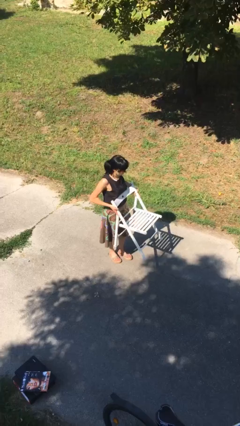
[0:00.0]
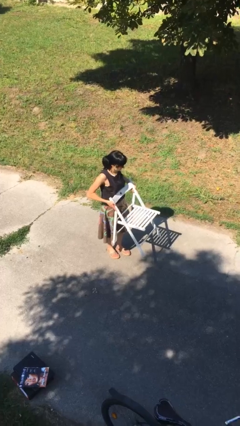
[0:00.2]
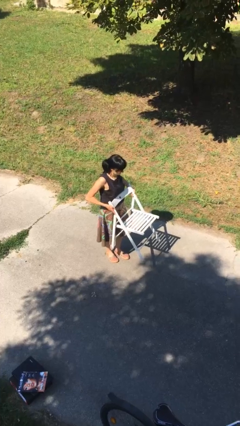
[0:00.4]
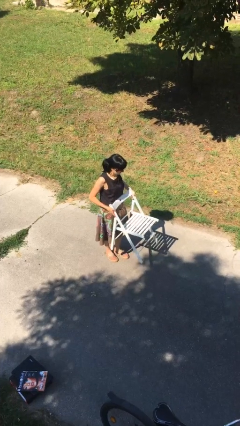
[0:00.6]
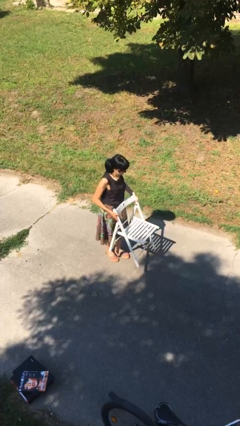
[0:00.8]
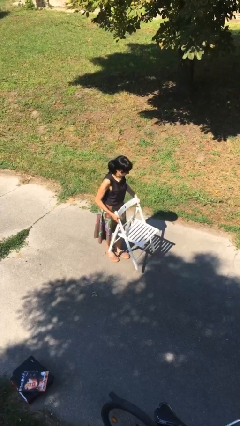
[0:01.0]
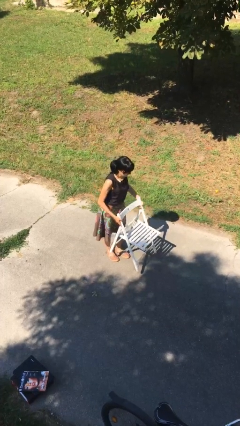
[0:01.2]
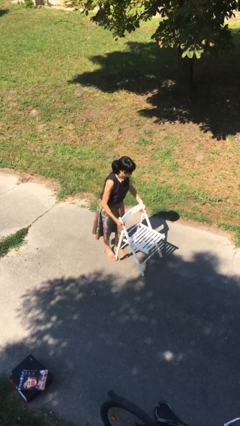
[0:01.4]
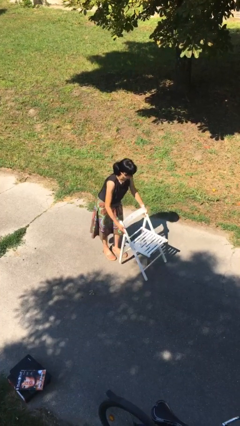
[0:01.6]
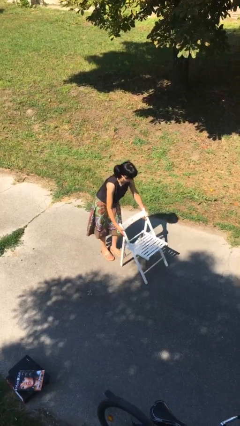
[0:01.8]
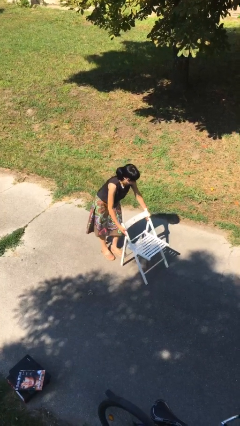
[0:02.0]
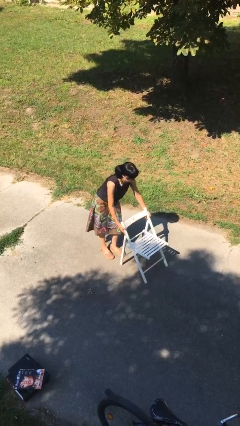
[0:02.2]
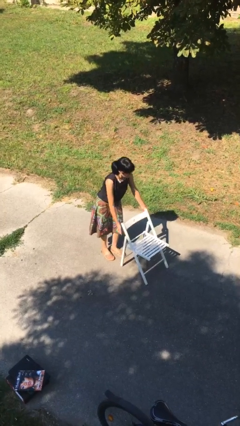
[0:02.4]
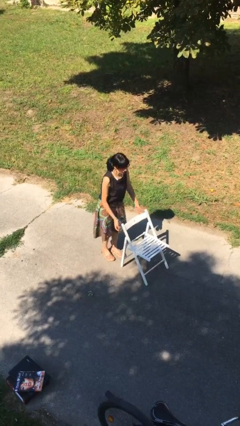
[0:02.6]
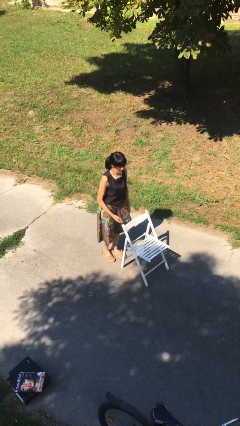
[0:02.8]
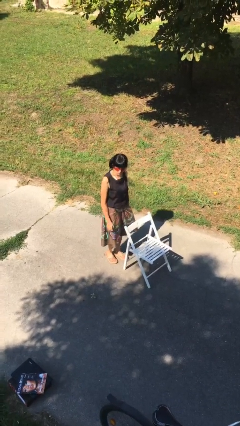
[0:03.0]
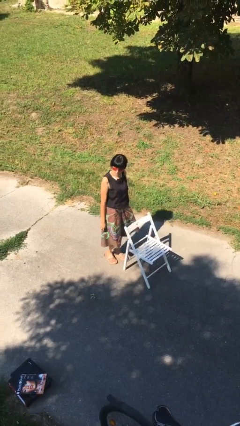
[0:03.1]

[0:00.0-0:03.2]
person puts down object on floor

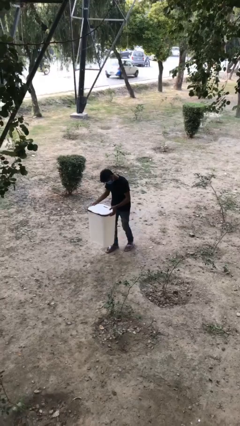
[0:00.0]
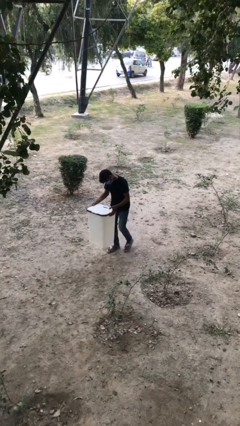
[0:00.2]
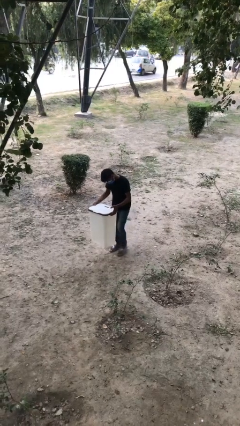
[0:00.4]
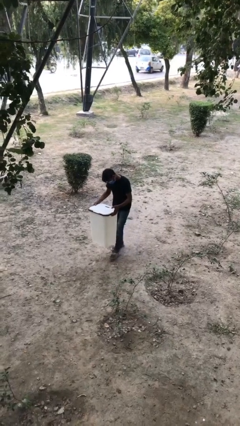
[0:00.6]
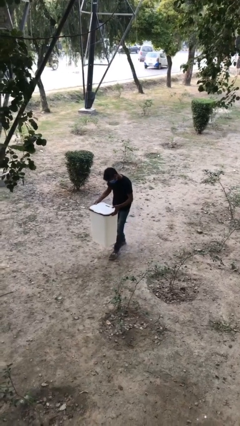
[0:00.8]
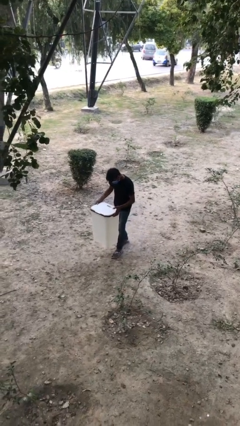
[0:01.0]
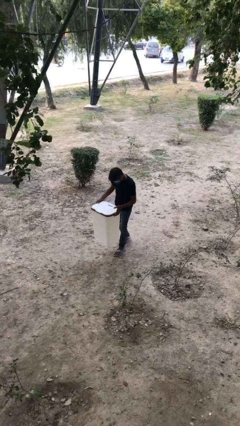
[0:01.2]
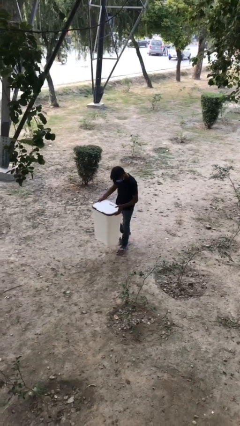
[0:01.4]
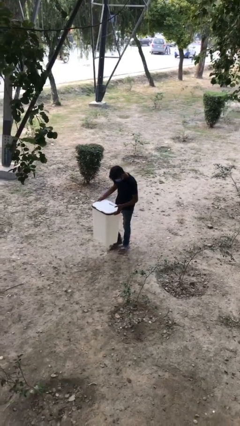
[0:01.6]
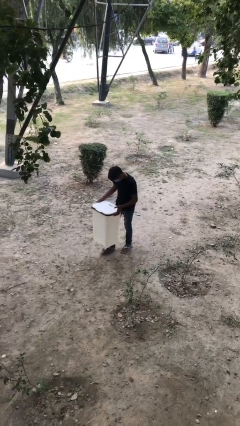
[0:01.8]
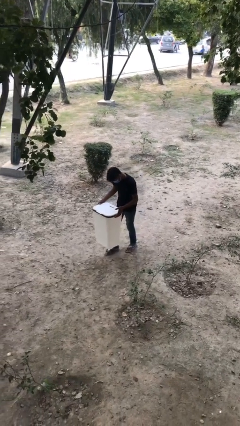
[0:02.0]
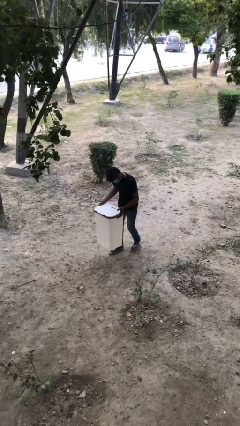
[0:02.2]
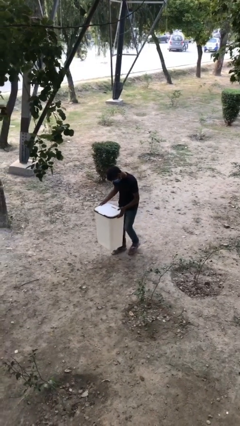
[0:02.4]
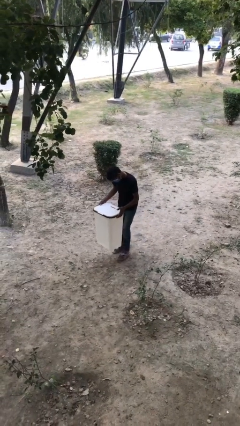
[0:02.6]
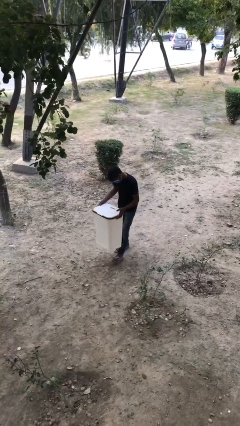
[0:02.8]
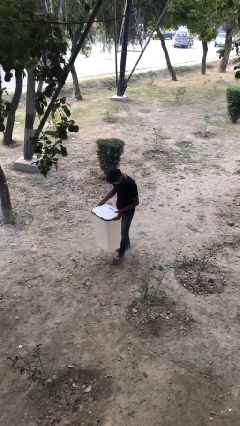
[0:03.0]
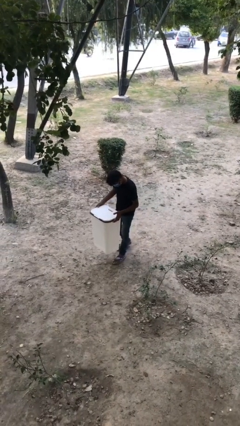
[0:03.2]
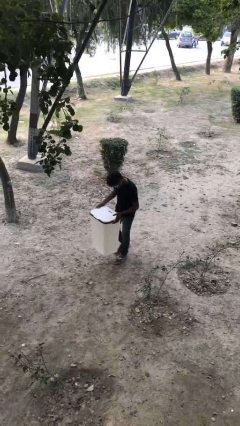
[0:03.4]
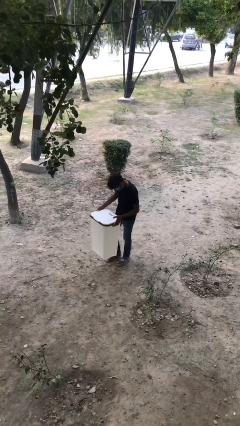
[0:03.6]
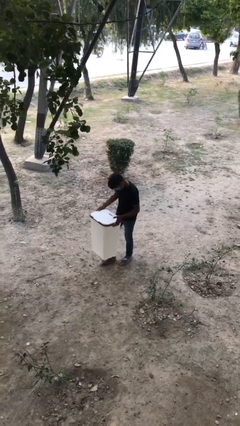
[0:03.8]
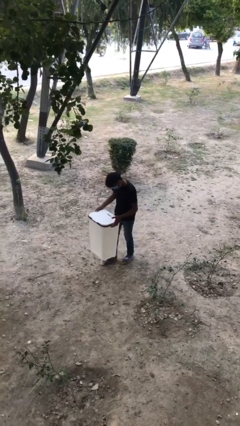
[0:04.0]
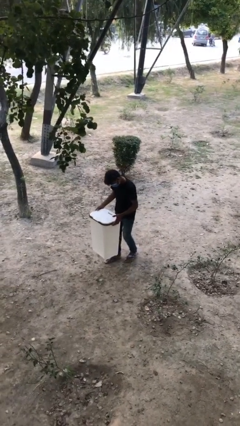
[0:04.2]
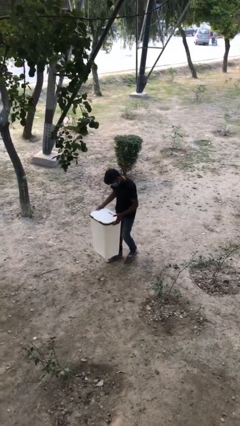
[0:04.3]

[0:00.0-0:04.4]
person carries heavy object

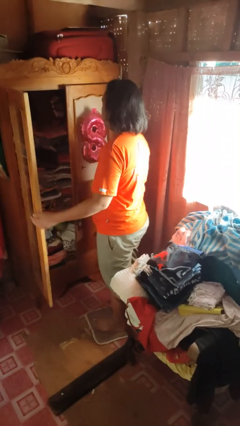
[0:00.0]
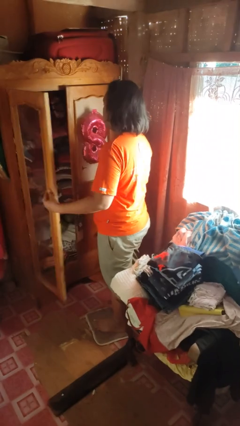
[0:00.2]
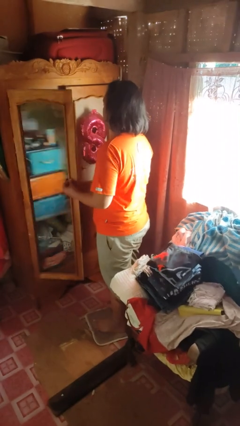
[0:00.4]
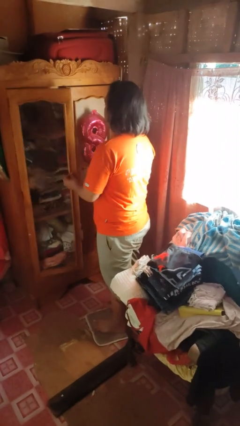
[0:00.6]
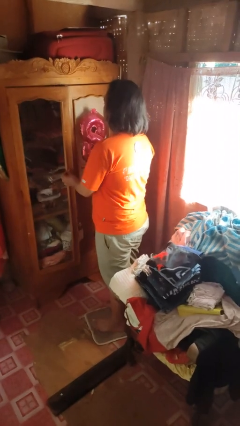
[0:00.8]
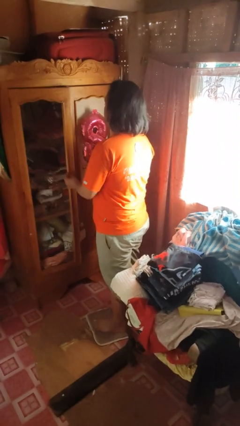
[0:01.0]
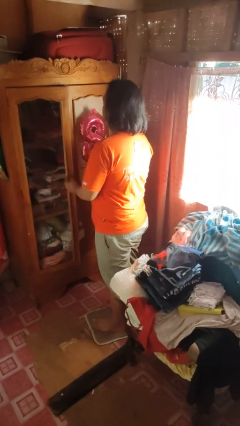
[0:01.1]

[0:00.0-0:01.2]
person closes dresser drawer

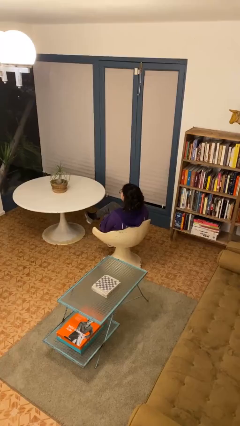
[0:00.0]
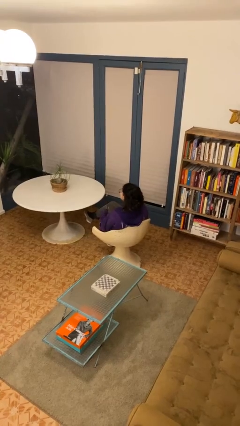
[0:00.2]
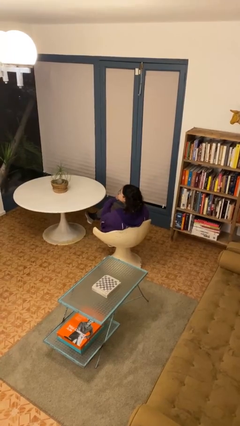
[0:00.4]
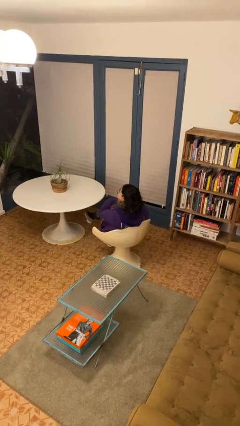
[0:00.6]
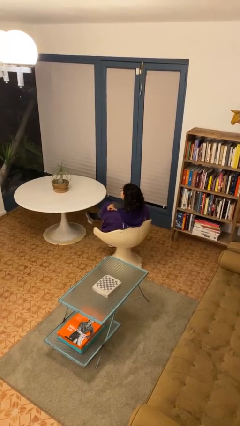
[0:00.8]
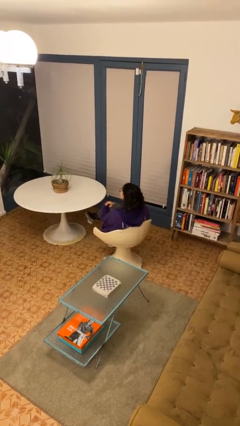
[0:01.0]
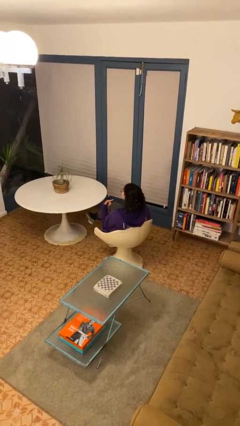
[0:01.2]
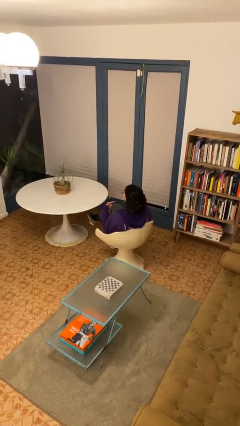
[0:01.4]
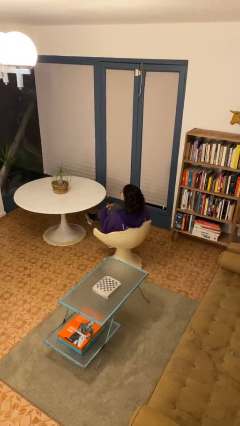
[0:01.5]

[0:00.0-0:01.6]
person gestures cut

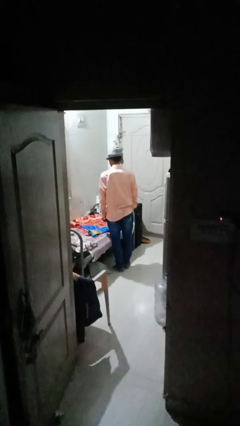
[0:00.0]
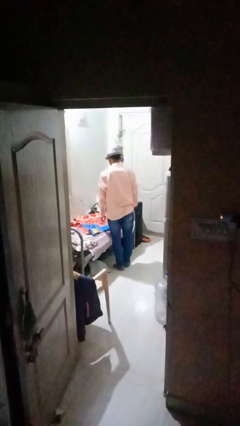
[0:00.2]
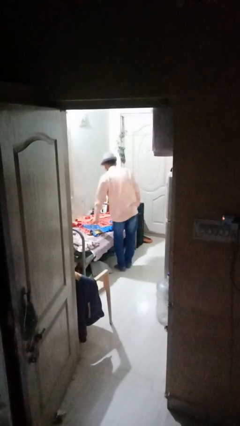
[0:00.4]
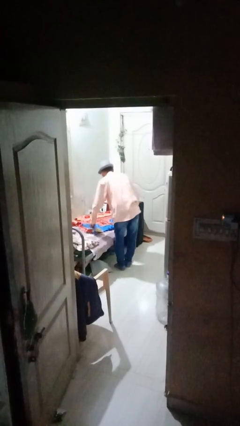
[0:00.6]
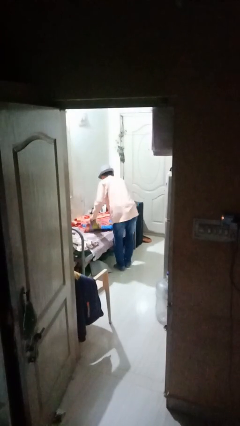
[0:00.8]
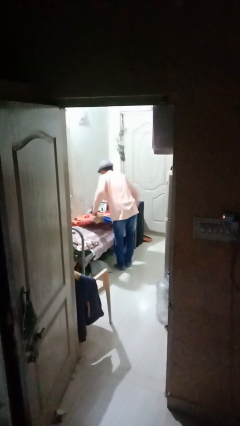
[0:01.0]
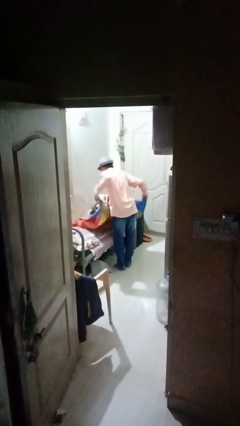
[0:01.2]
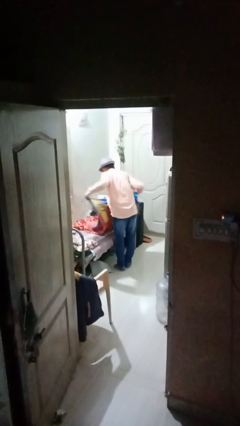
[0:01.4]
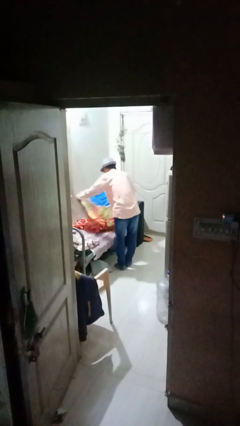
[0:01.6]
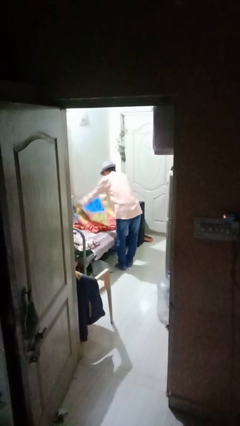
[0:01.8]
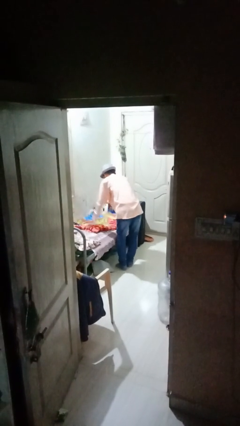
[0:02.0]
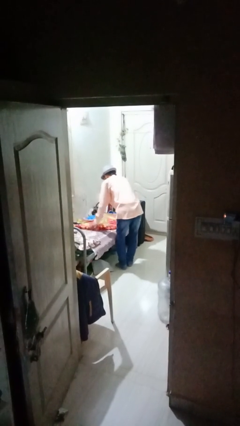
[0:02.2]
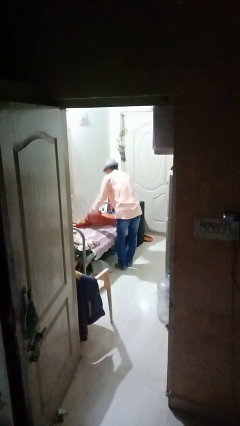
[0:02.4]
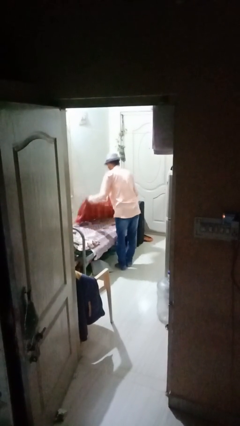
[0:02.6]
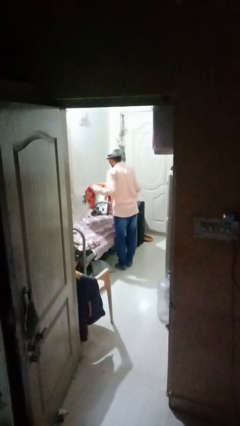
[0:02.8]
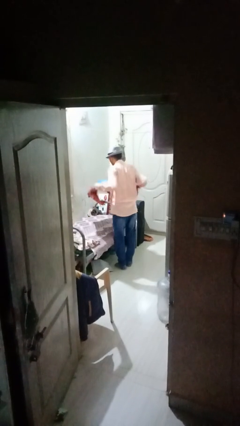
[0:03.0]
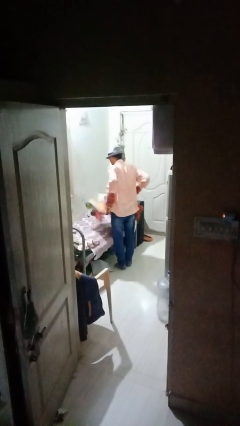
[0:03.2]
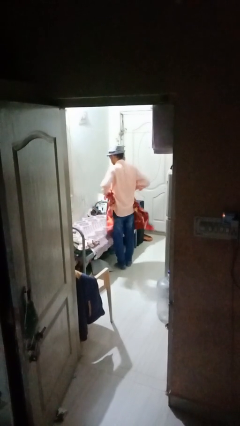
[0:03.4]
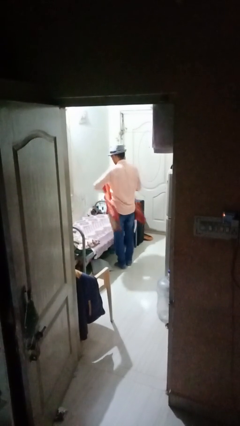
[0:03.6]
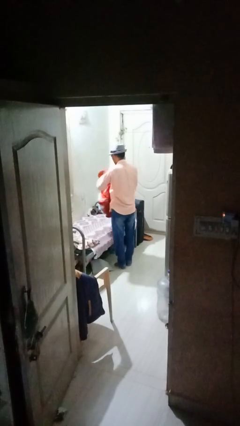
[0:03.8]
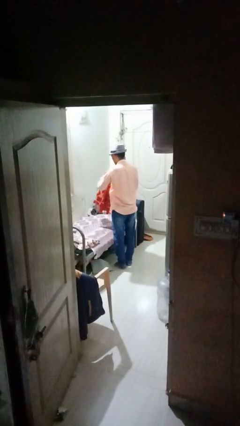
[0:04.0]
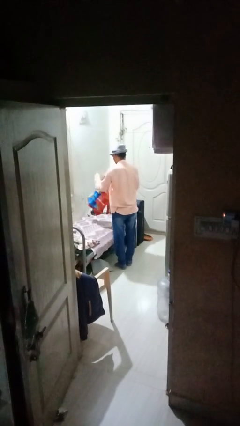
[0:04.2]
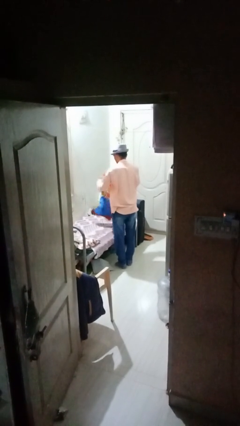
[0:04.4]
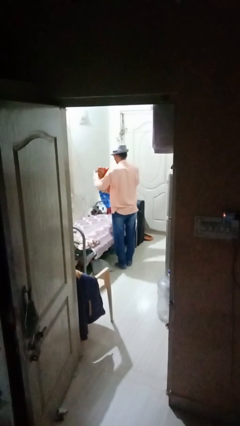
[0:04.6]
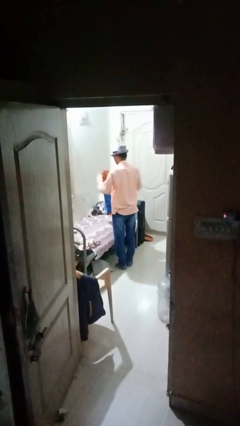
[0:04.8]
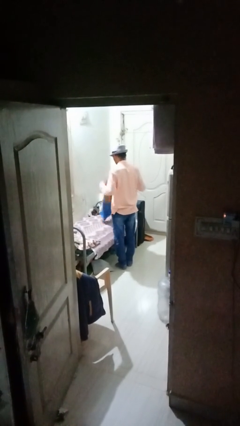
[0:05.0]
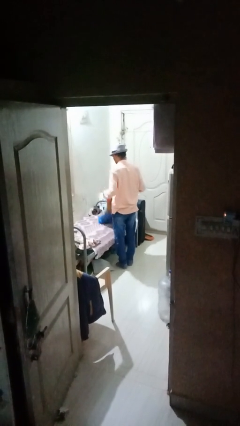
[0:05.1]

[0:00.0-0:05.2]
person folds blanket

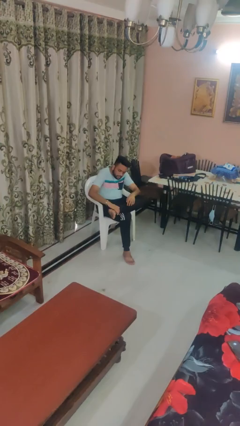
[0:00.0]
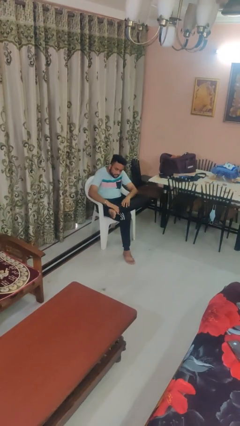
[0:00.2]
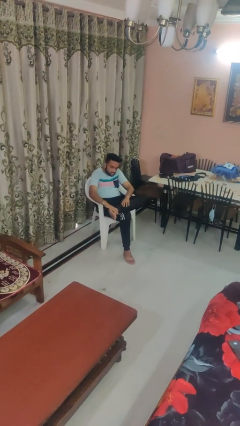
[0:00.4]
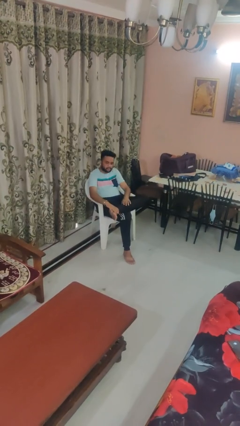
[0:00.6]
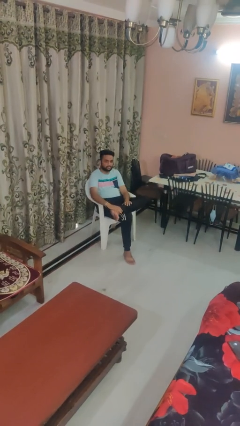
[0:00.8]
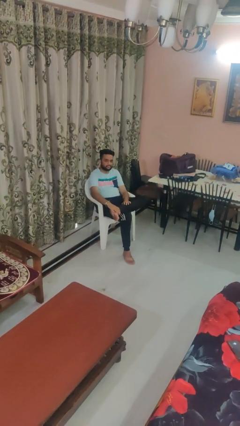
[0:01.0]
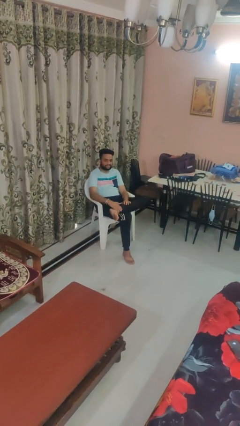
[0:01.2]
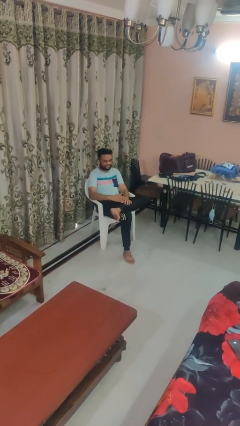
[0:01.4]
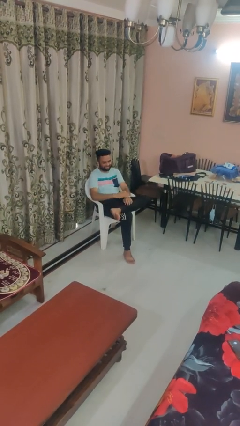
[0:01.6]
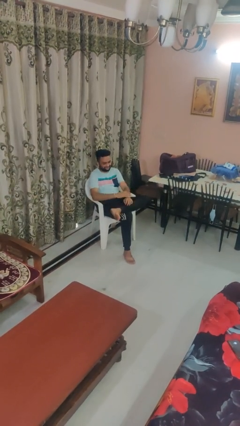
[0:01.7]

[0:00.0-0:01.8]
person swats bug
